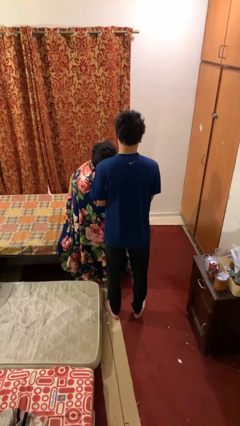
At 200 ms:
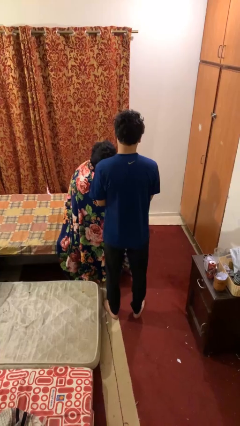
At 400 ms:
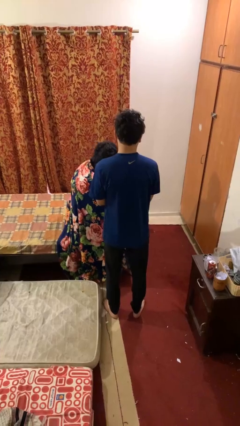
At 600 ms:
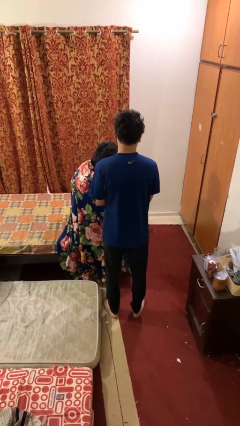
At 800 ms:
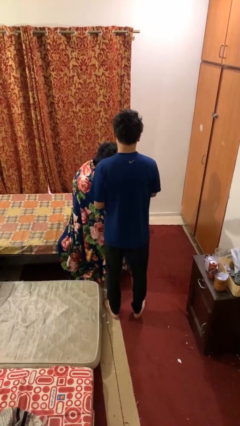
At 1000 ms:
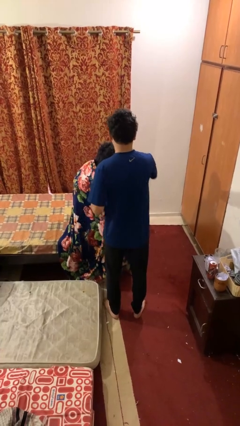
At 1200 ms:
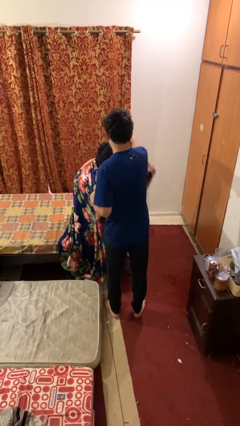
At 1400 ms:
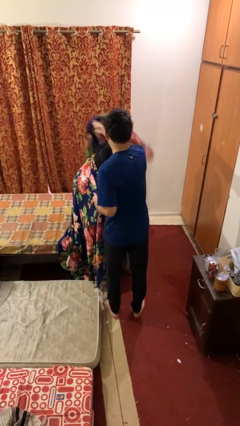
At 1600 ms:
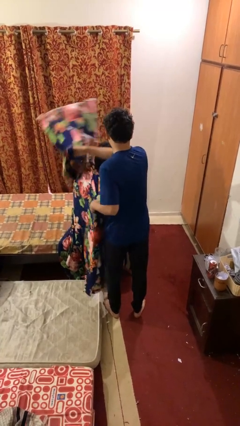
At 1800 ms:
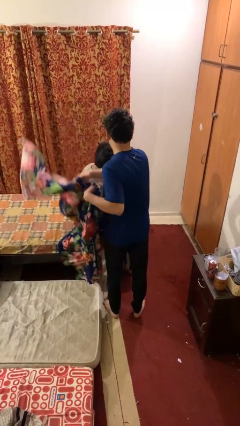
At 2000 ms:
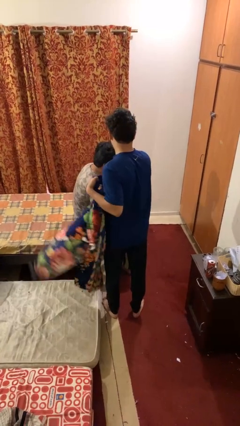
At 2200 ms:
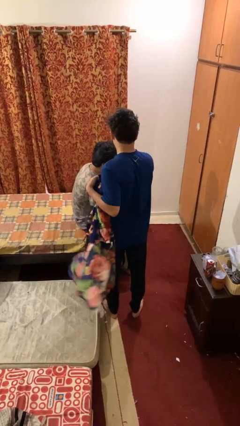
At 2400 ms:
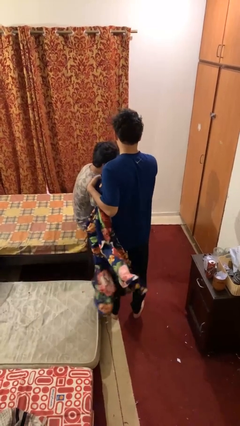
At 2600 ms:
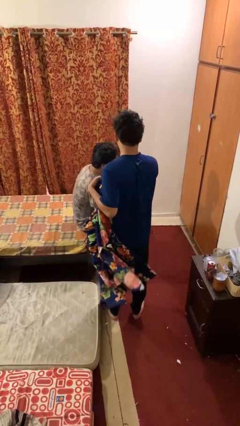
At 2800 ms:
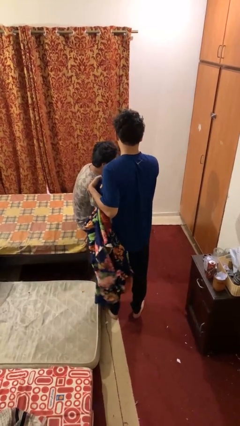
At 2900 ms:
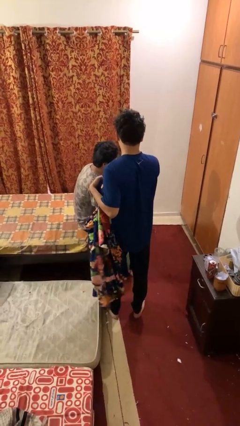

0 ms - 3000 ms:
person uncovers friend with blanket

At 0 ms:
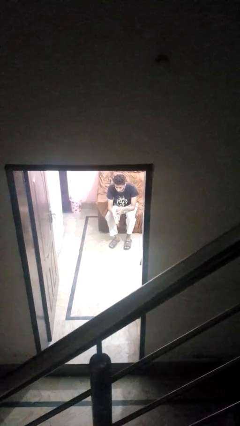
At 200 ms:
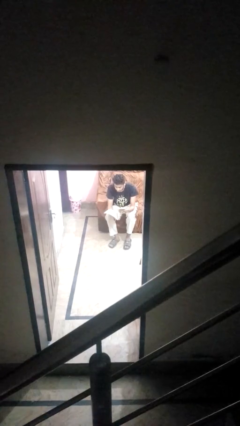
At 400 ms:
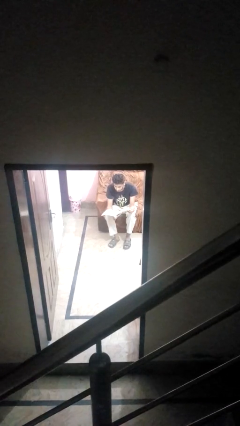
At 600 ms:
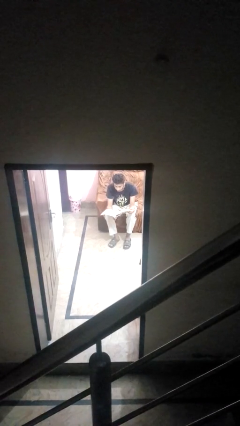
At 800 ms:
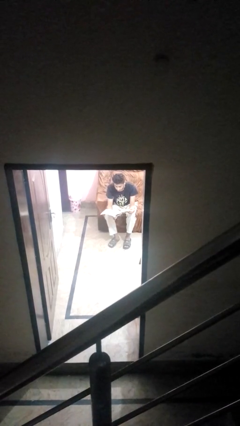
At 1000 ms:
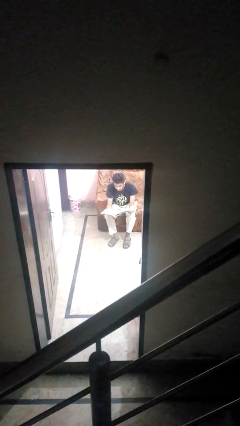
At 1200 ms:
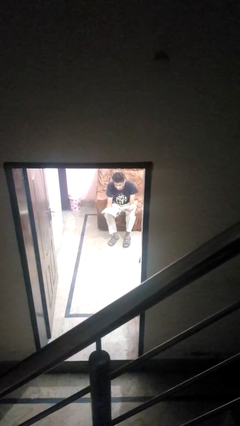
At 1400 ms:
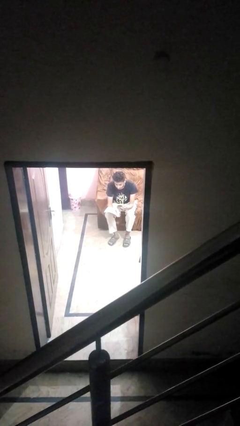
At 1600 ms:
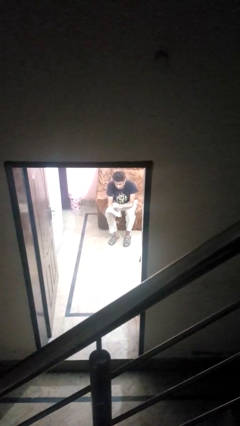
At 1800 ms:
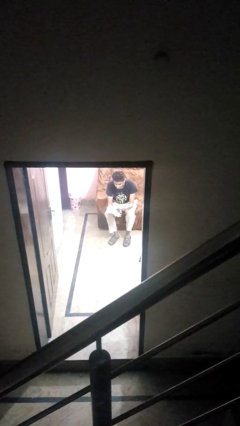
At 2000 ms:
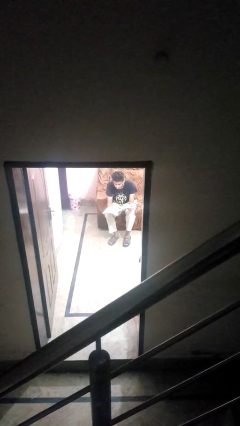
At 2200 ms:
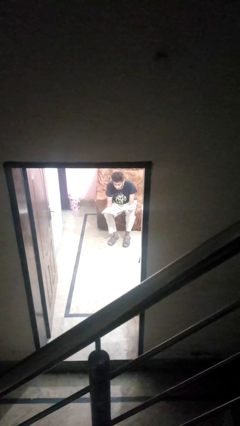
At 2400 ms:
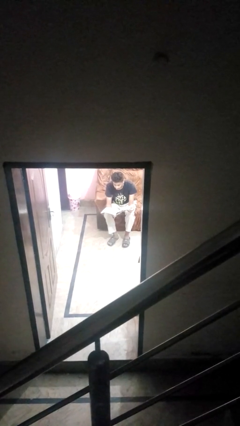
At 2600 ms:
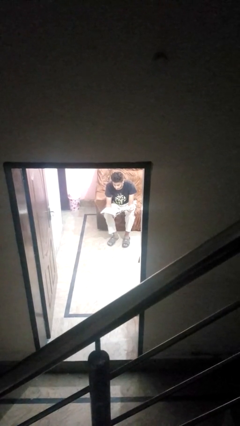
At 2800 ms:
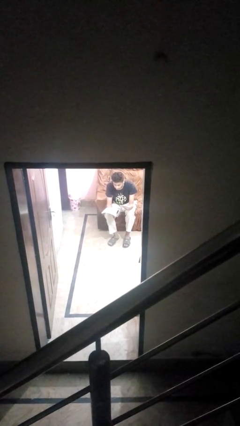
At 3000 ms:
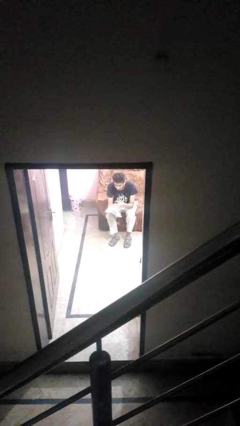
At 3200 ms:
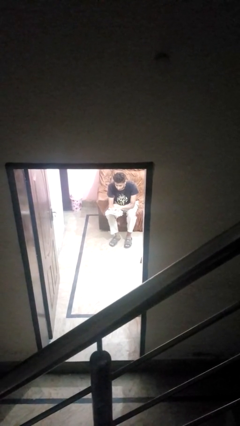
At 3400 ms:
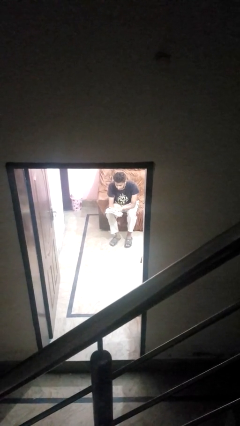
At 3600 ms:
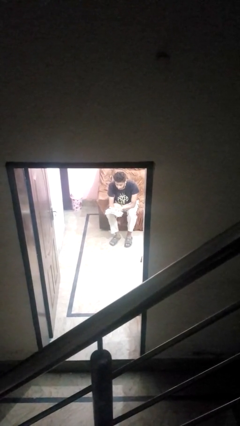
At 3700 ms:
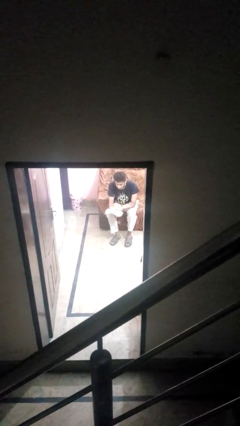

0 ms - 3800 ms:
person reads magazine

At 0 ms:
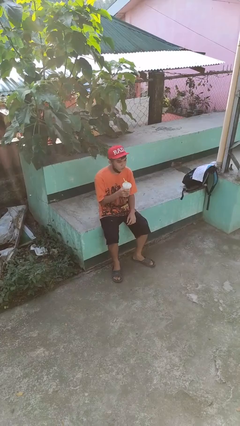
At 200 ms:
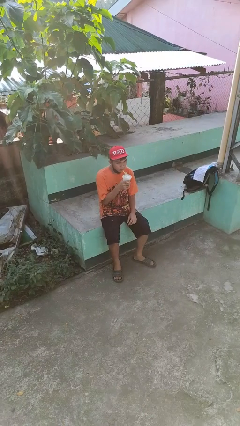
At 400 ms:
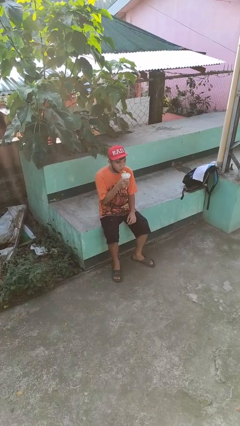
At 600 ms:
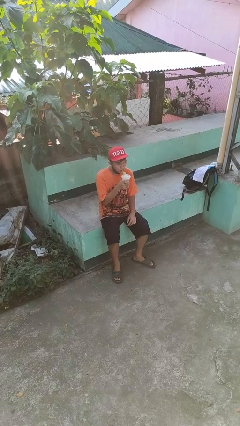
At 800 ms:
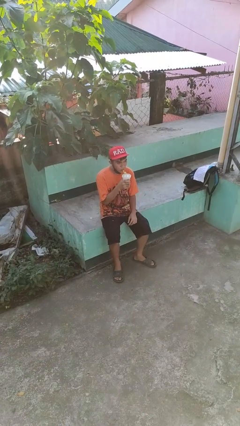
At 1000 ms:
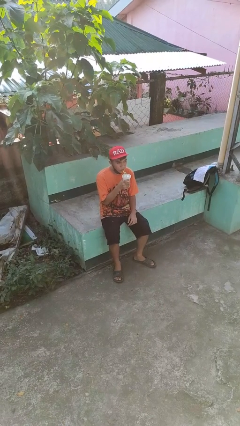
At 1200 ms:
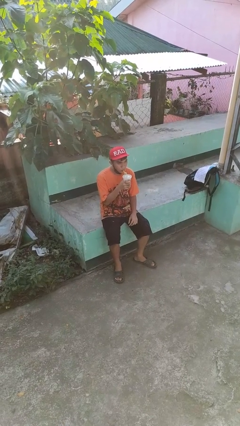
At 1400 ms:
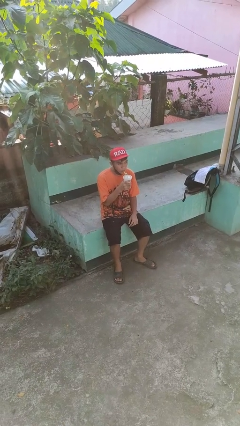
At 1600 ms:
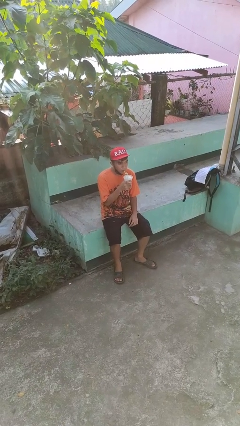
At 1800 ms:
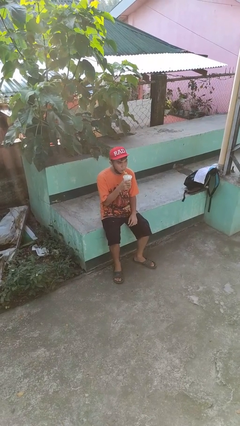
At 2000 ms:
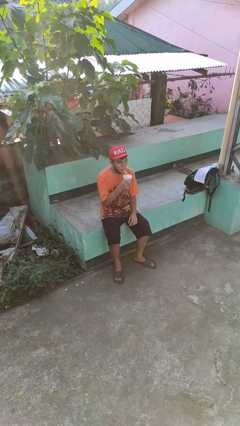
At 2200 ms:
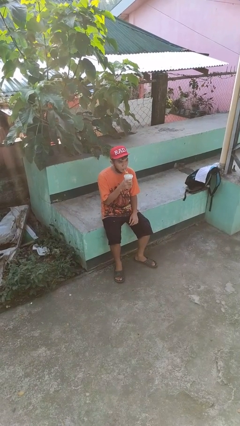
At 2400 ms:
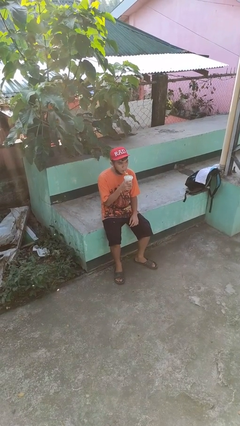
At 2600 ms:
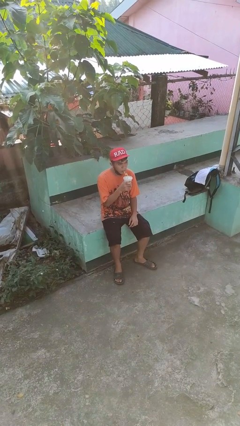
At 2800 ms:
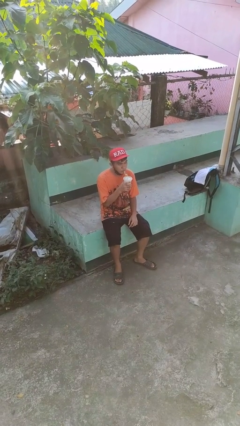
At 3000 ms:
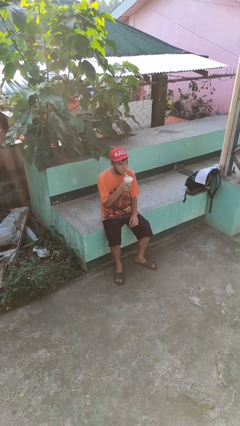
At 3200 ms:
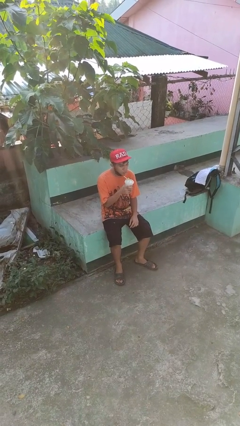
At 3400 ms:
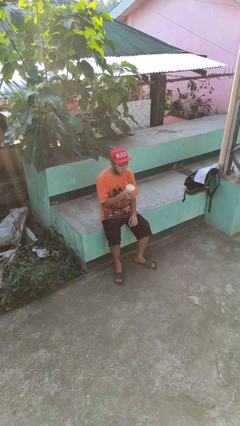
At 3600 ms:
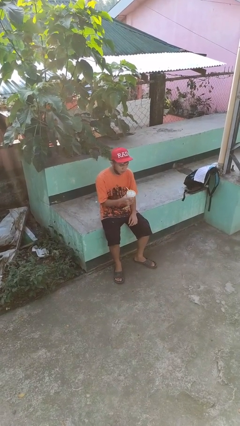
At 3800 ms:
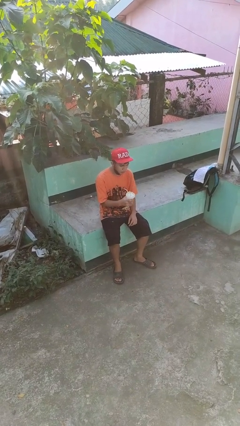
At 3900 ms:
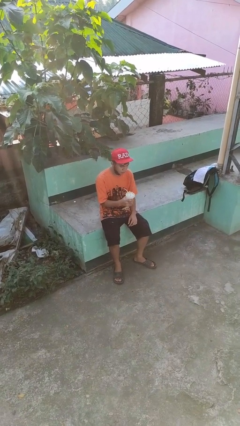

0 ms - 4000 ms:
person drinks from straw

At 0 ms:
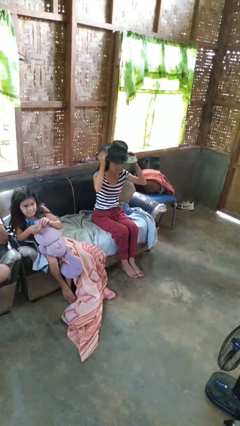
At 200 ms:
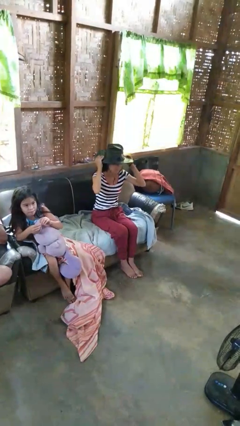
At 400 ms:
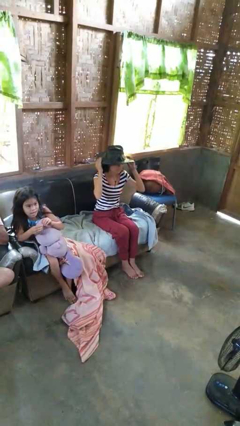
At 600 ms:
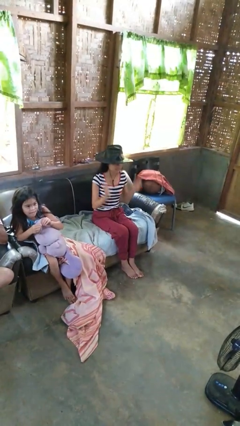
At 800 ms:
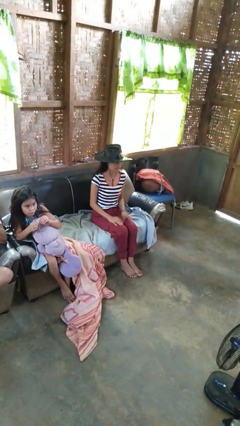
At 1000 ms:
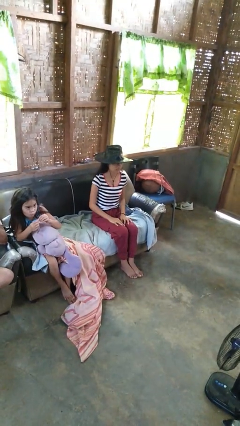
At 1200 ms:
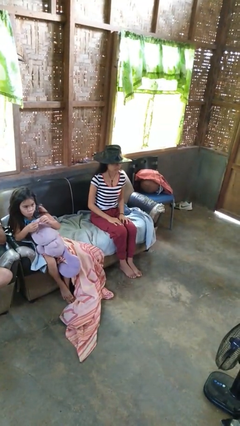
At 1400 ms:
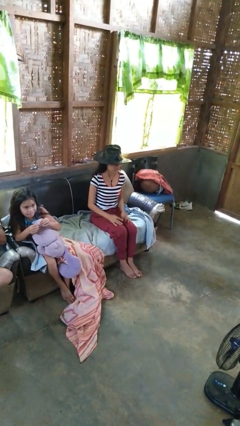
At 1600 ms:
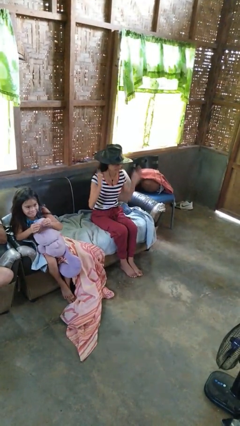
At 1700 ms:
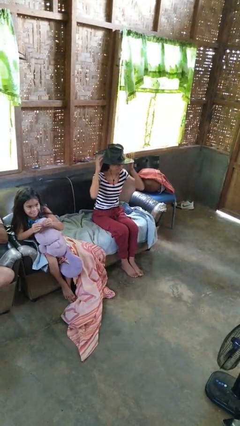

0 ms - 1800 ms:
person puts on hat

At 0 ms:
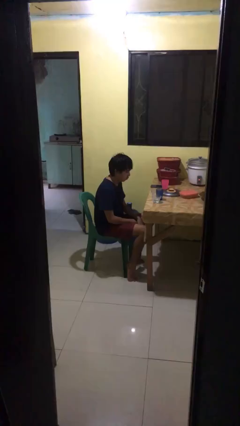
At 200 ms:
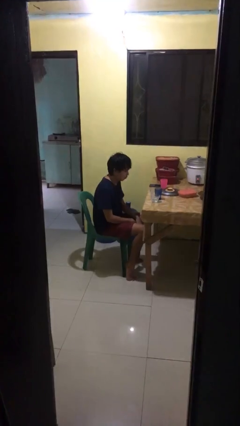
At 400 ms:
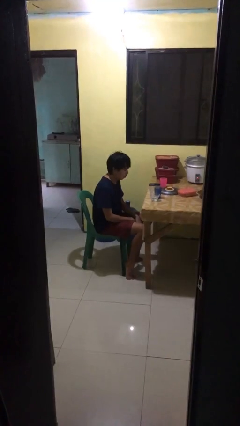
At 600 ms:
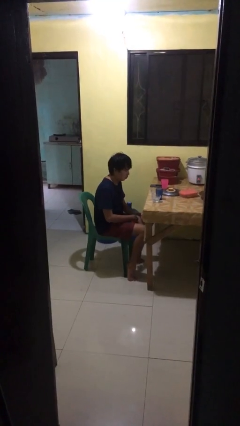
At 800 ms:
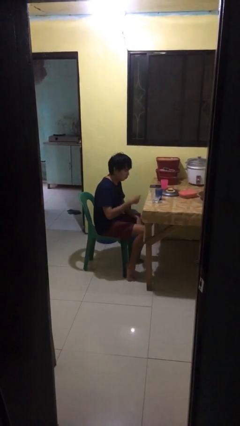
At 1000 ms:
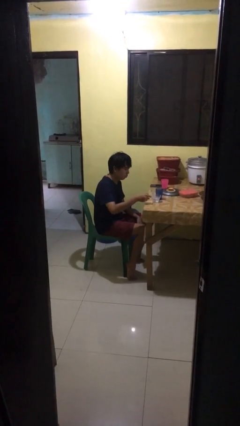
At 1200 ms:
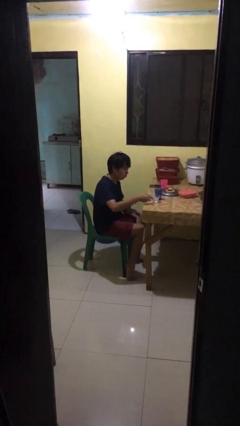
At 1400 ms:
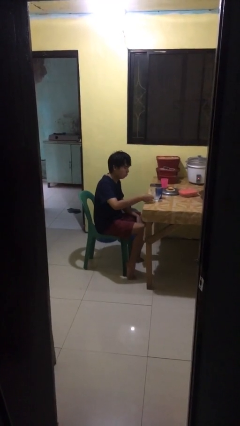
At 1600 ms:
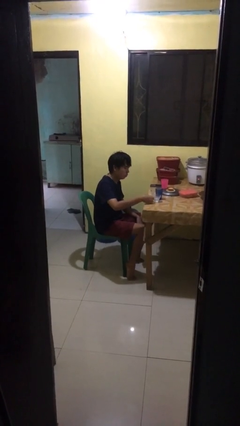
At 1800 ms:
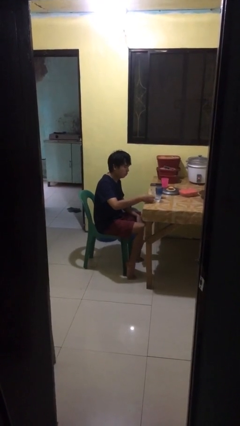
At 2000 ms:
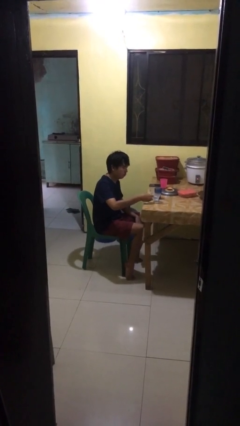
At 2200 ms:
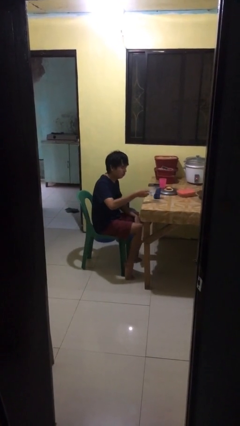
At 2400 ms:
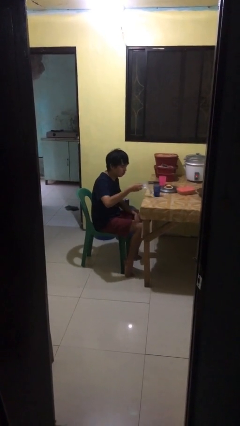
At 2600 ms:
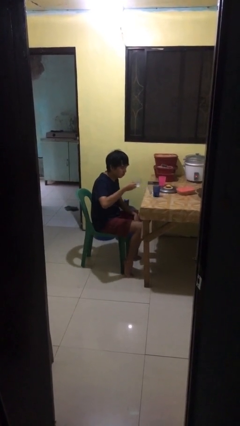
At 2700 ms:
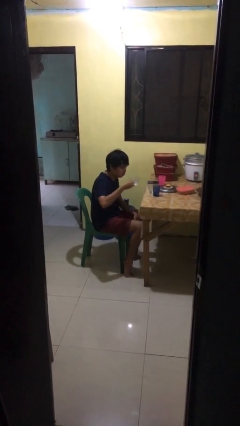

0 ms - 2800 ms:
person picks up object from table

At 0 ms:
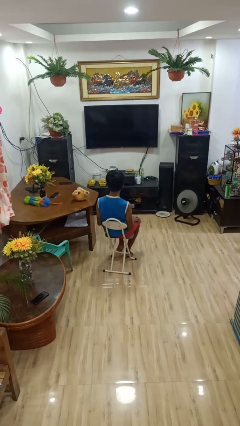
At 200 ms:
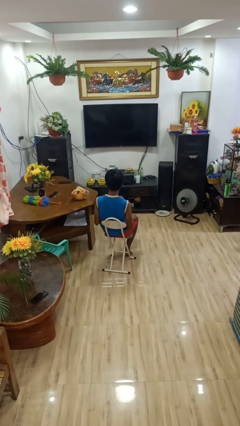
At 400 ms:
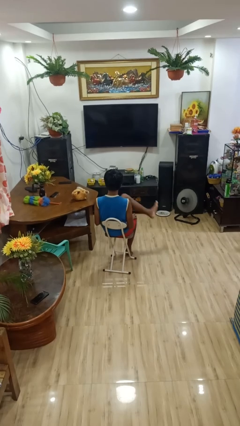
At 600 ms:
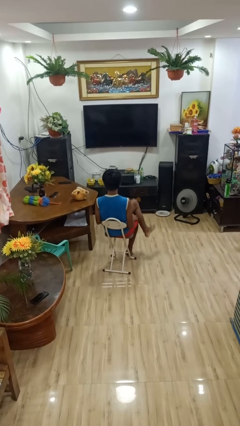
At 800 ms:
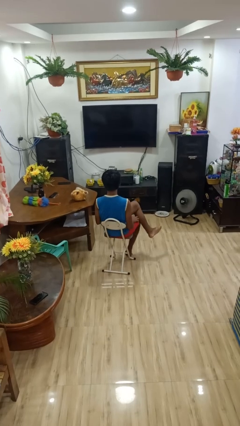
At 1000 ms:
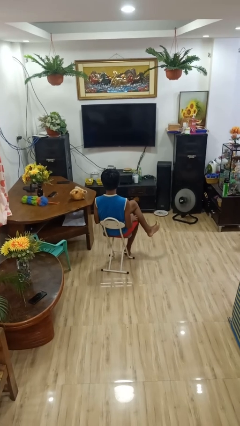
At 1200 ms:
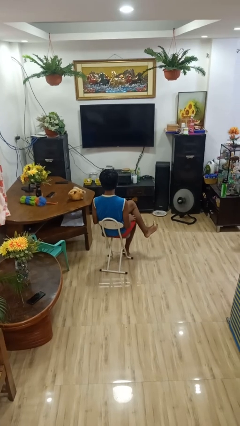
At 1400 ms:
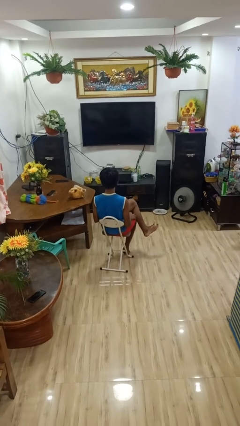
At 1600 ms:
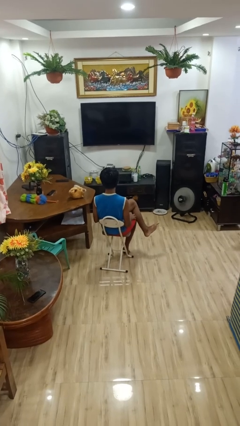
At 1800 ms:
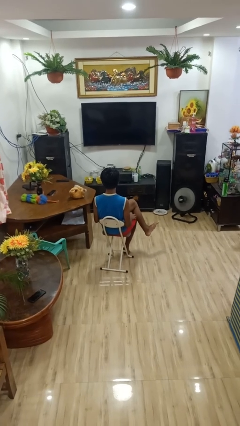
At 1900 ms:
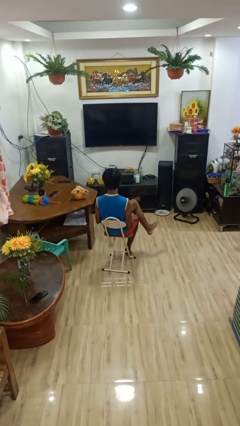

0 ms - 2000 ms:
person crosses legs
